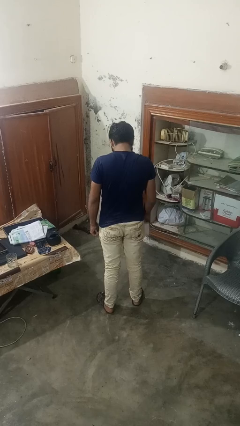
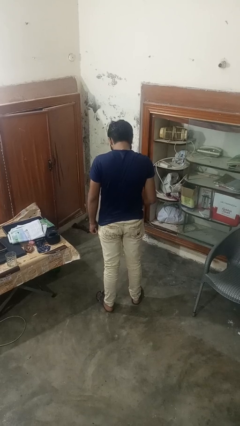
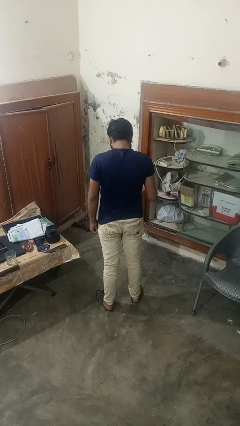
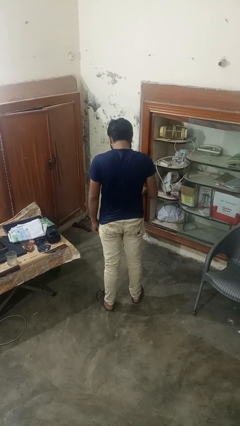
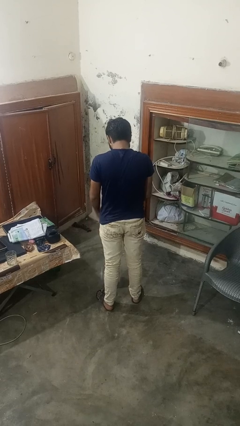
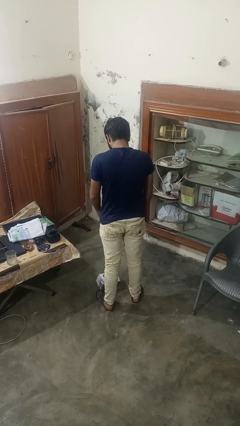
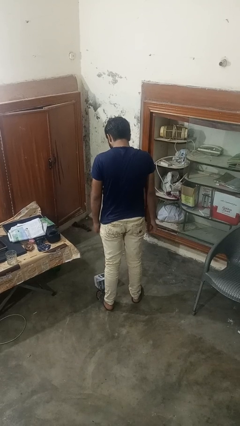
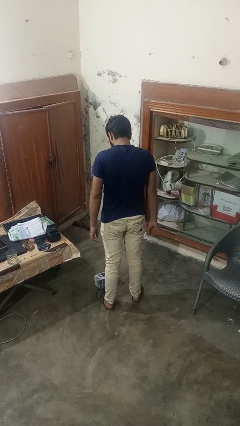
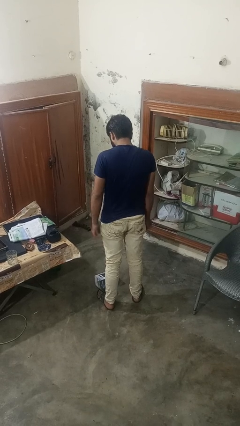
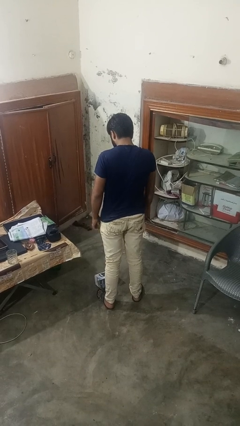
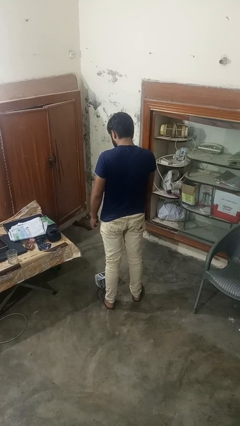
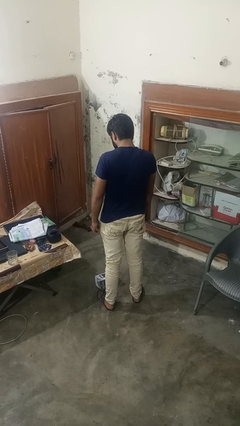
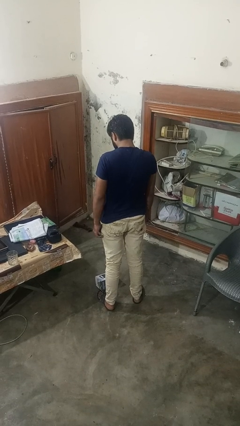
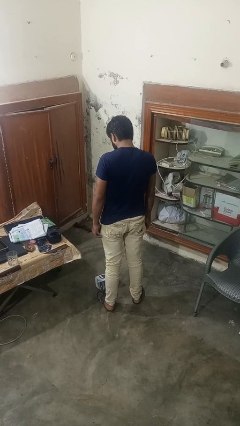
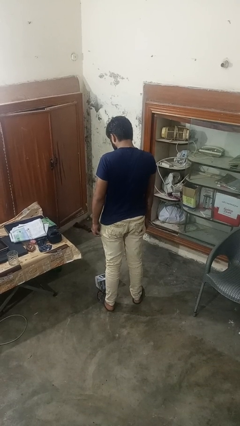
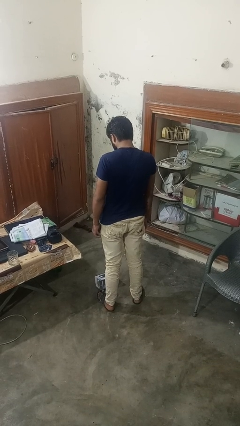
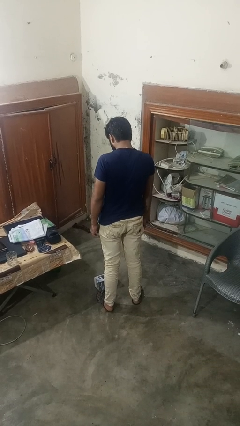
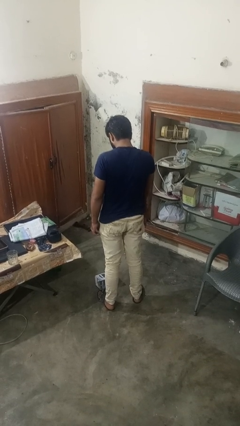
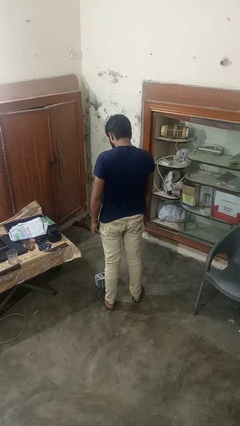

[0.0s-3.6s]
person drops object

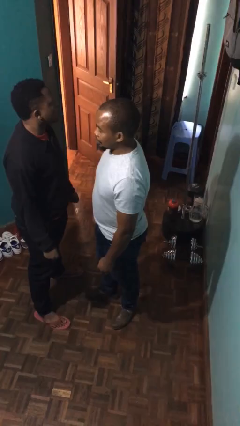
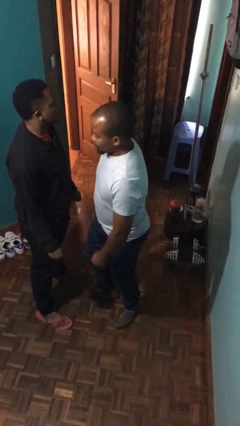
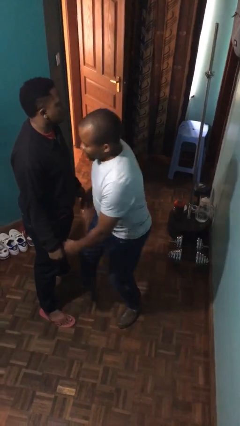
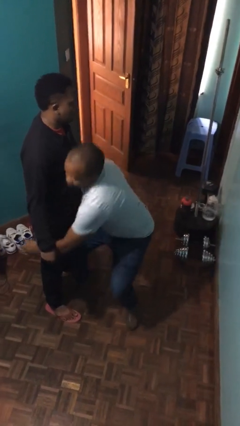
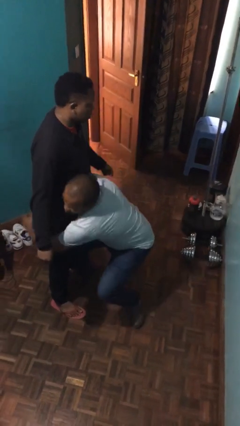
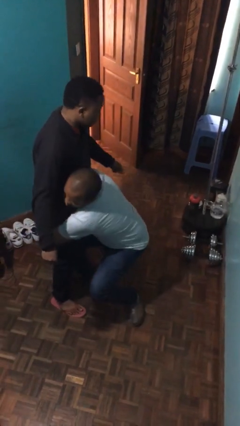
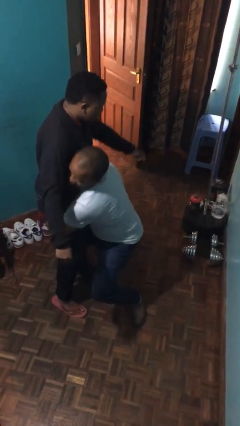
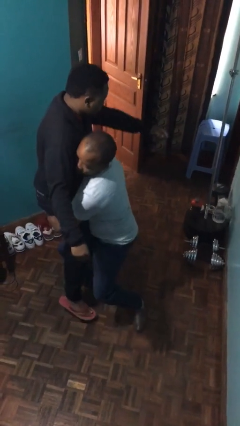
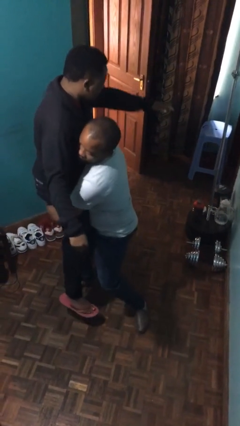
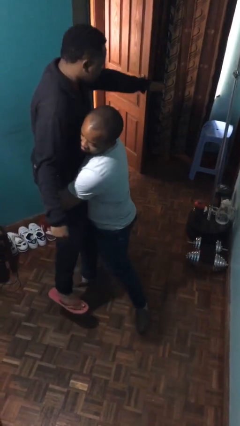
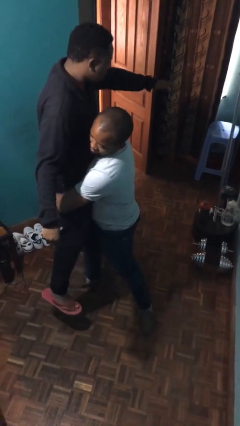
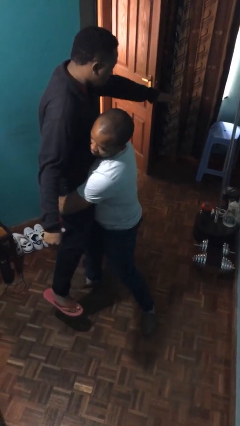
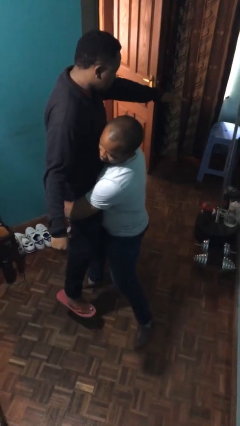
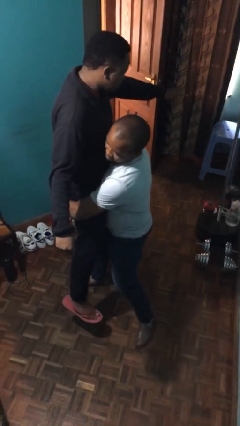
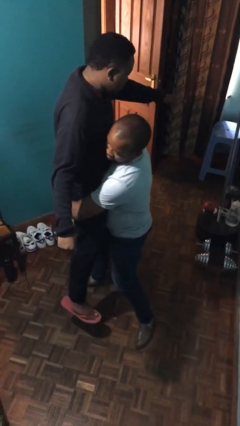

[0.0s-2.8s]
person picks up person

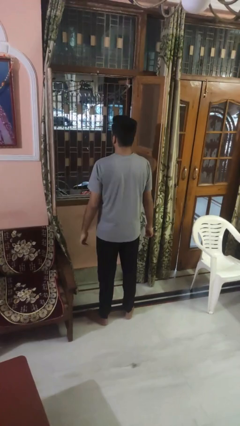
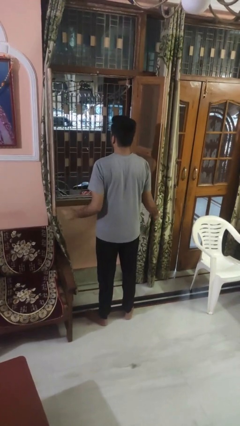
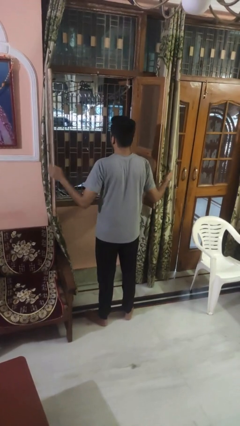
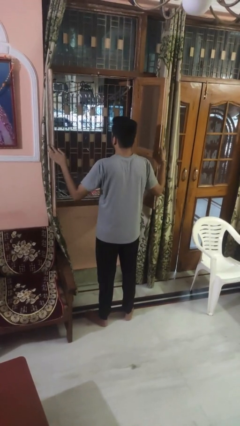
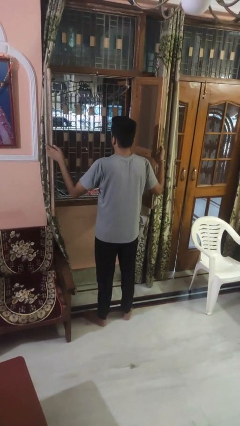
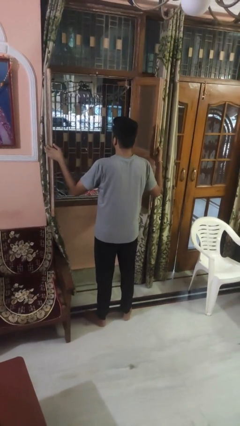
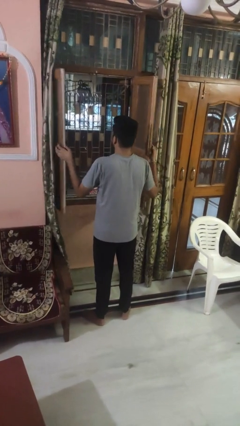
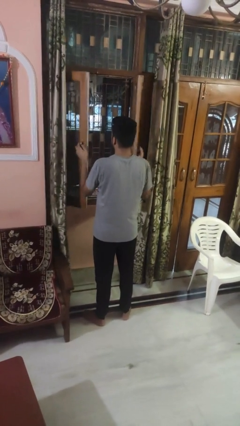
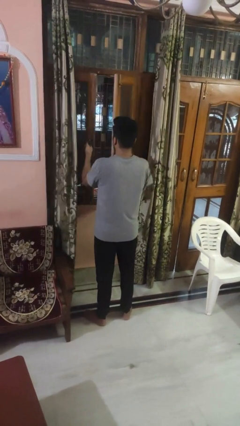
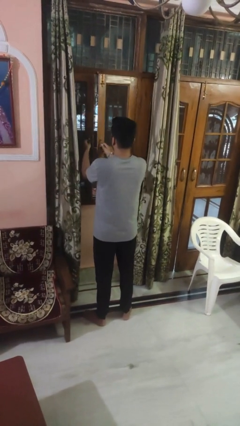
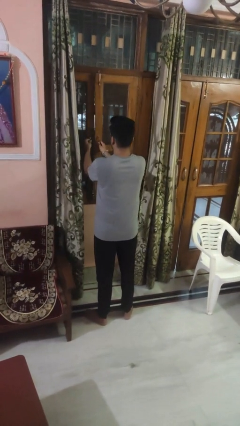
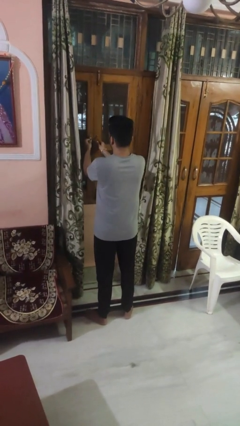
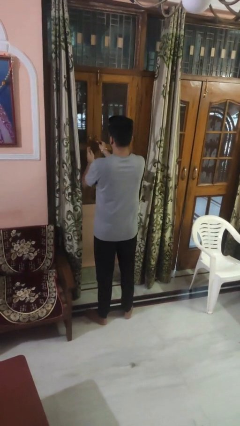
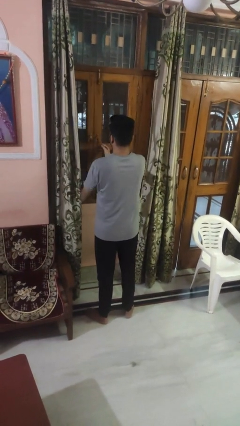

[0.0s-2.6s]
person closes home window

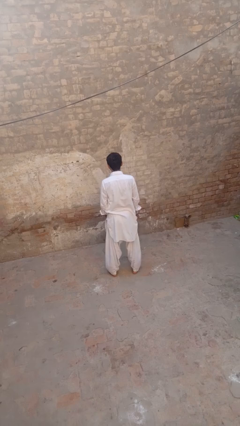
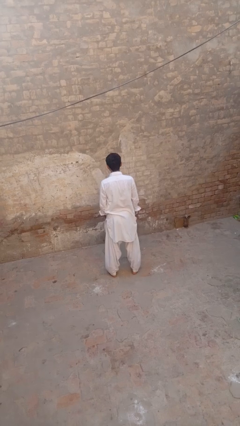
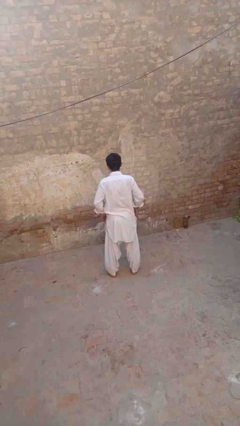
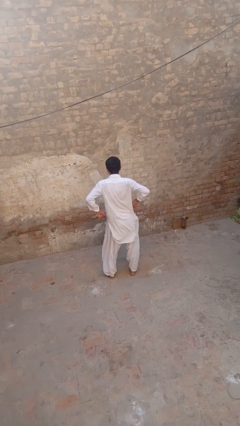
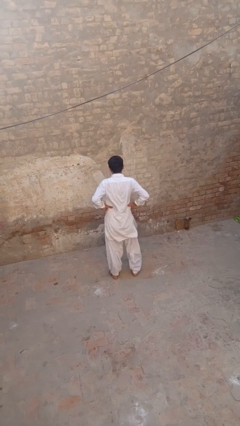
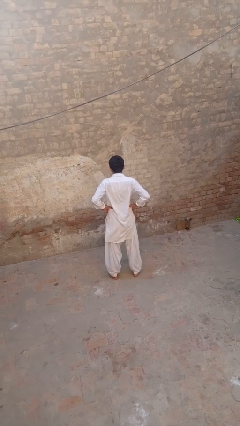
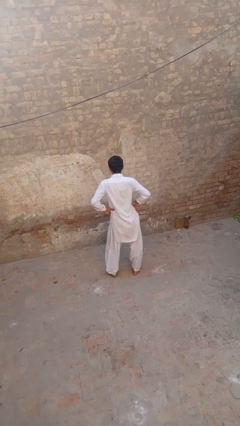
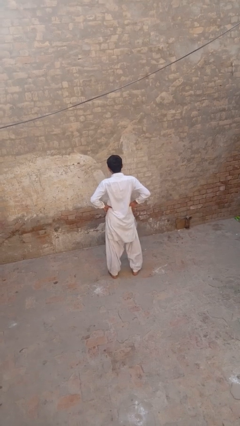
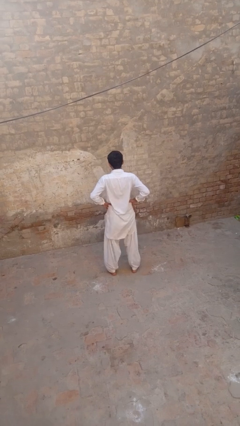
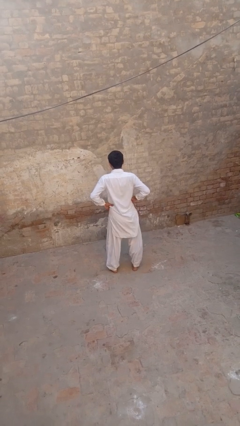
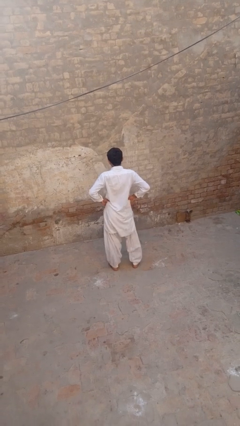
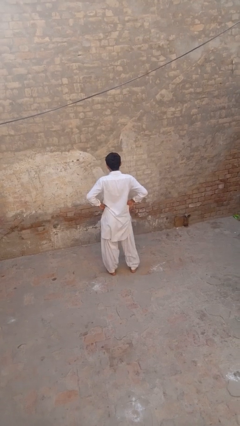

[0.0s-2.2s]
person wiggles hips

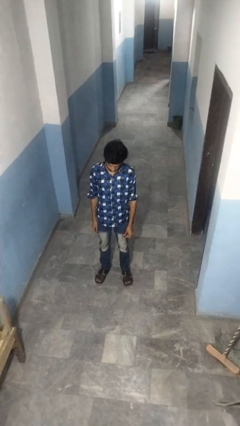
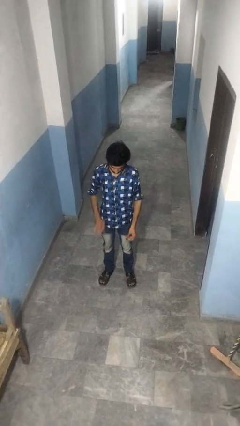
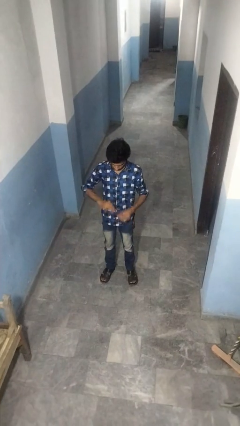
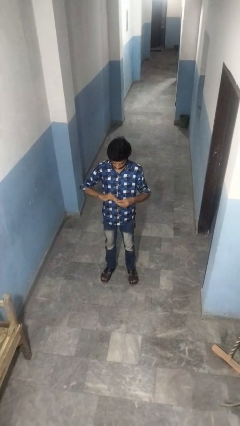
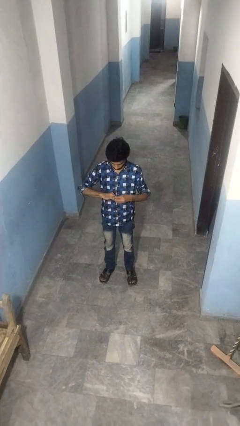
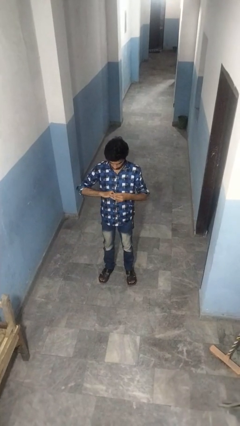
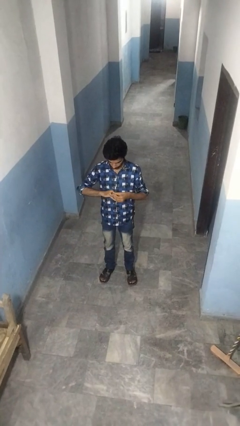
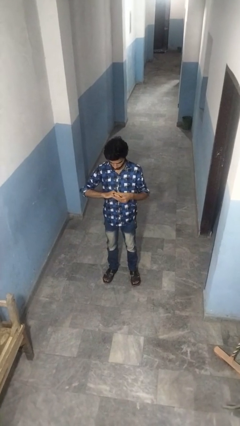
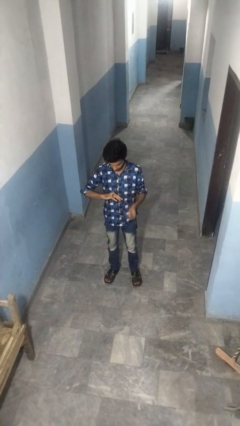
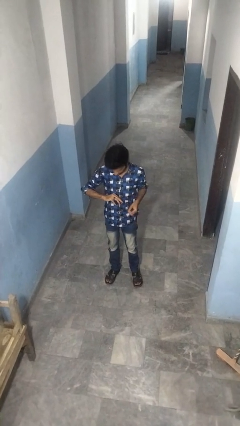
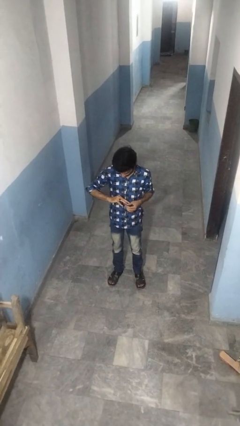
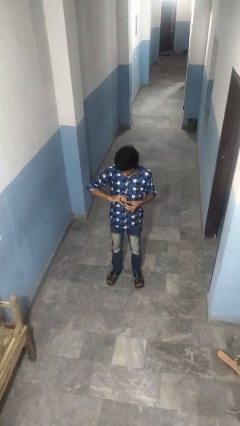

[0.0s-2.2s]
person puts on ring

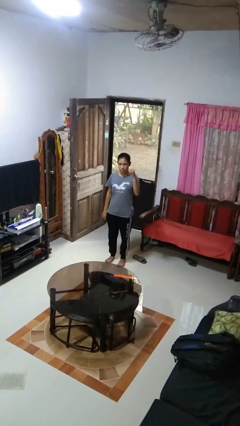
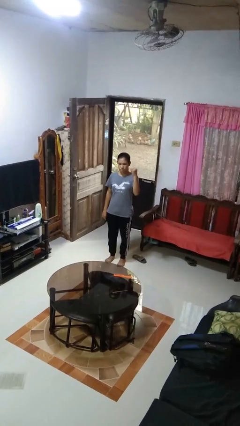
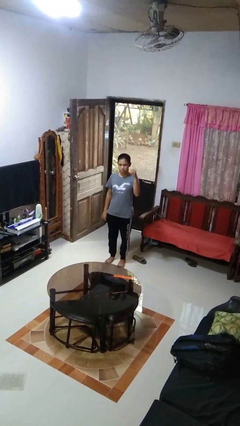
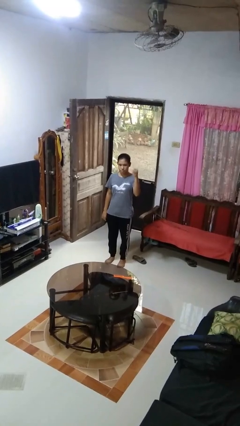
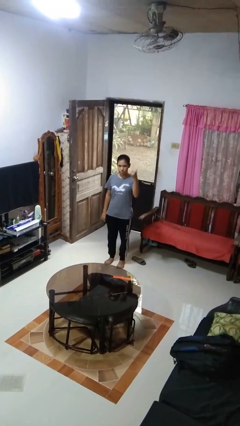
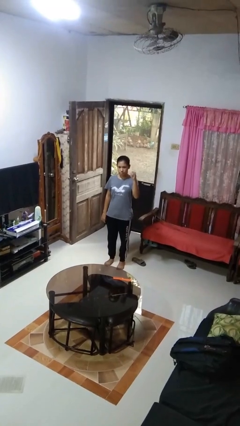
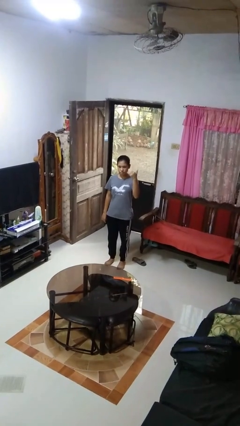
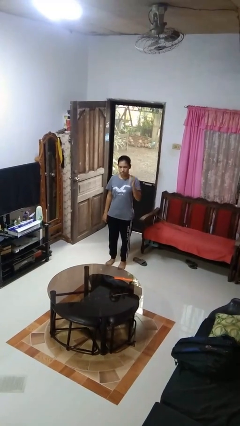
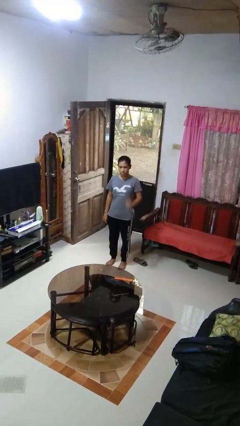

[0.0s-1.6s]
person gestures hang loose

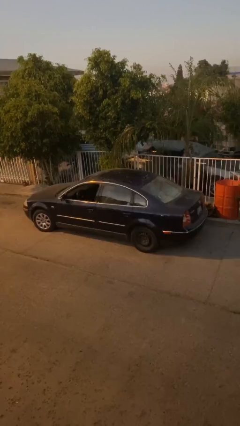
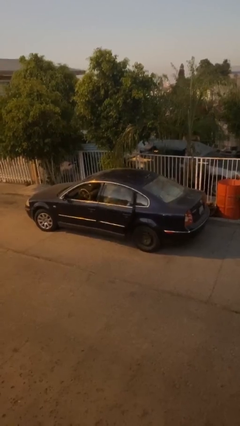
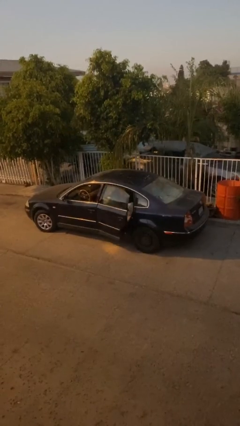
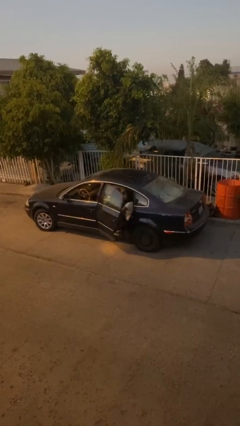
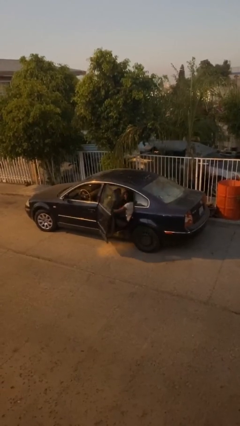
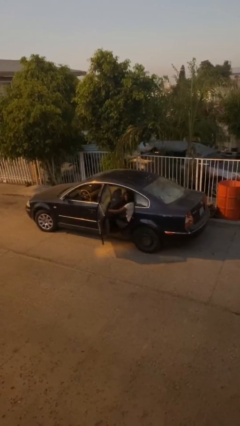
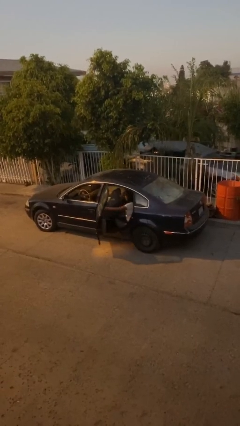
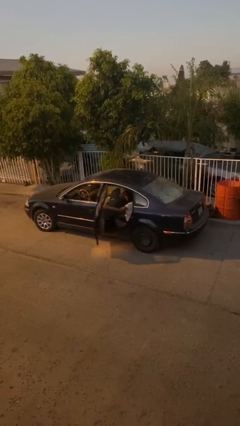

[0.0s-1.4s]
person opens car door

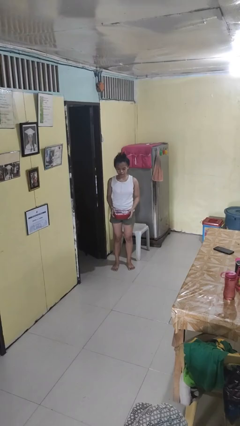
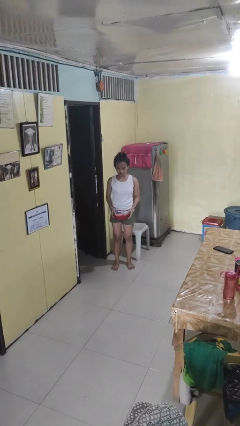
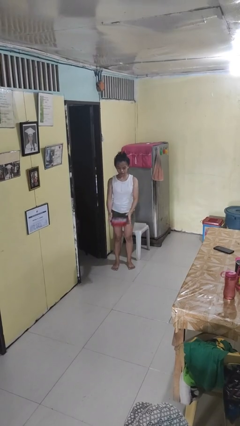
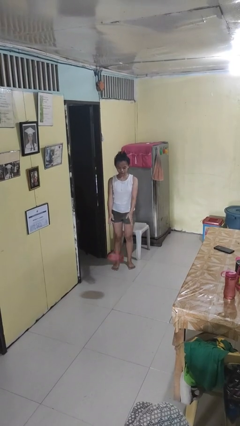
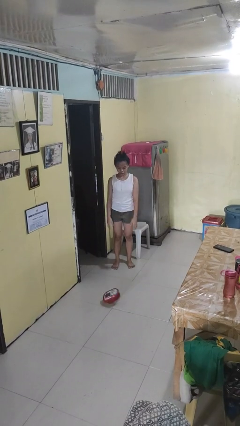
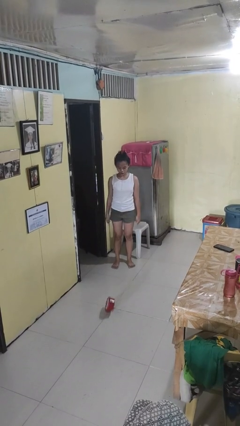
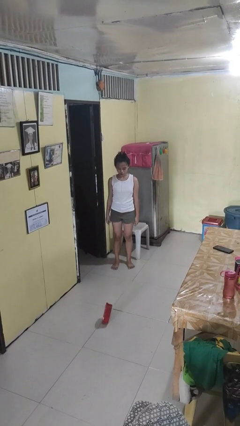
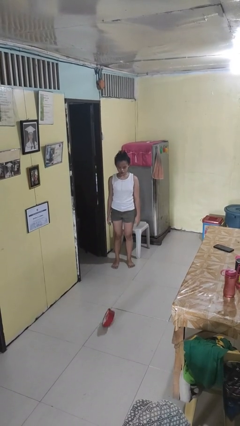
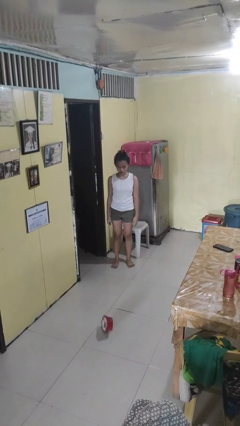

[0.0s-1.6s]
person throws object to ground
